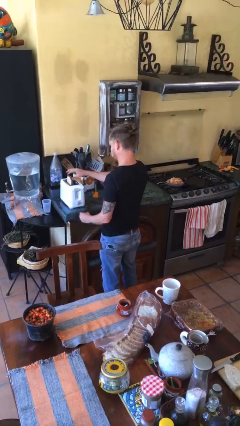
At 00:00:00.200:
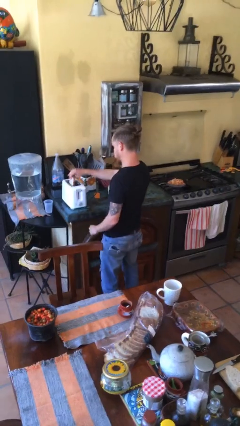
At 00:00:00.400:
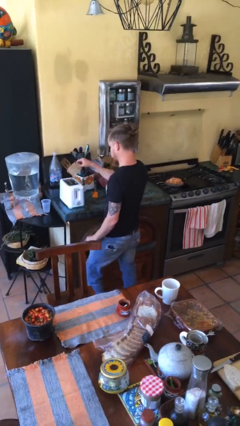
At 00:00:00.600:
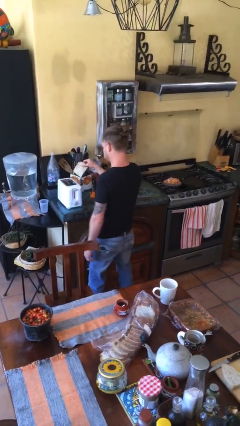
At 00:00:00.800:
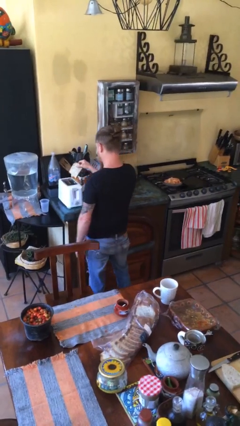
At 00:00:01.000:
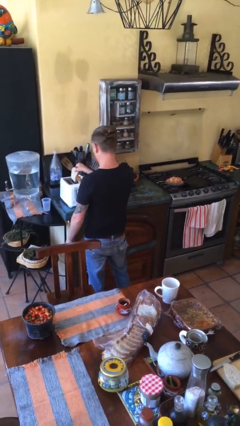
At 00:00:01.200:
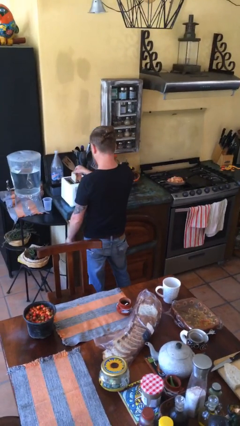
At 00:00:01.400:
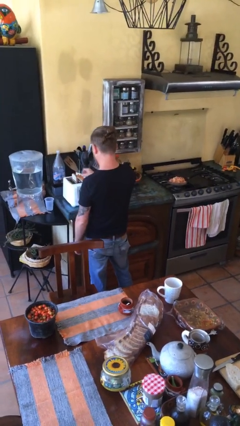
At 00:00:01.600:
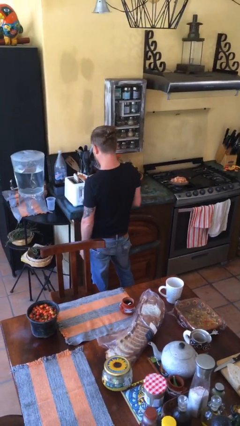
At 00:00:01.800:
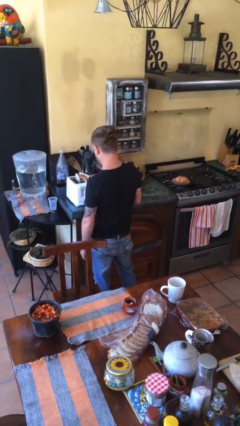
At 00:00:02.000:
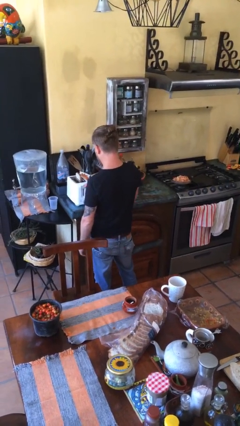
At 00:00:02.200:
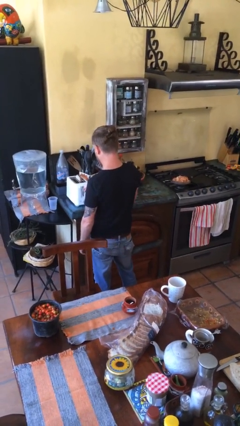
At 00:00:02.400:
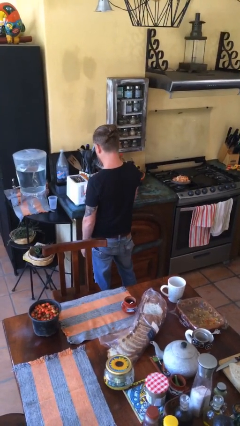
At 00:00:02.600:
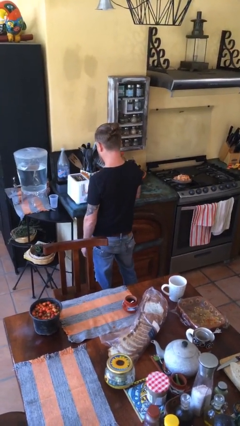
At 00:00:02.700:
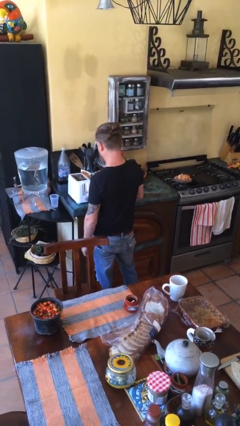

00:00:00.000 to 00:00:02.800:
person puts object into toaster

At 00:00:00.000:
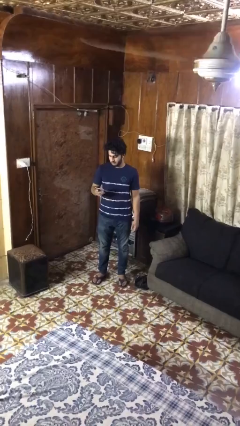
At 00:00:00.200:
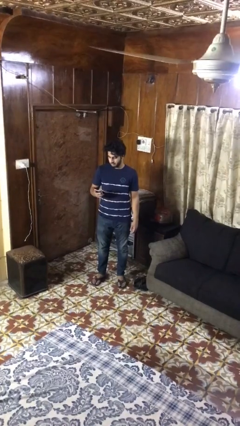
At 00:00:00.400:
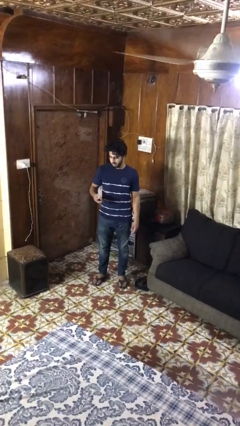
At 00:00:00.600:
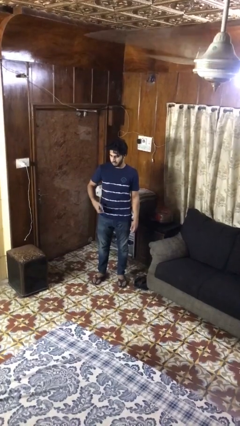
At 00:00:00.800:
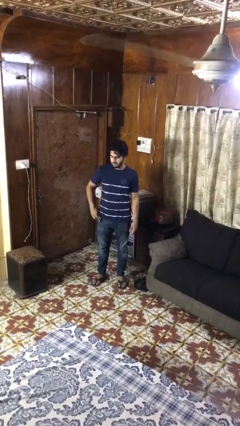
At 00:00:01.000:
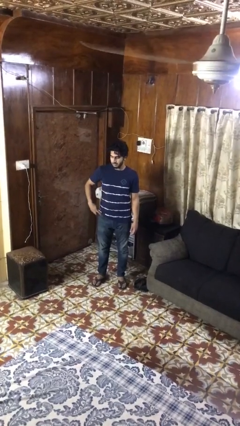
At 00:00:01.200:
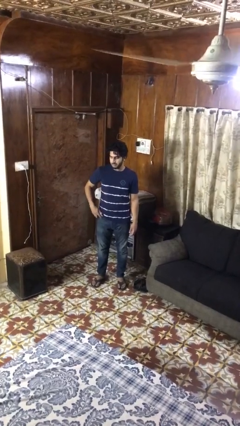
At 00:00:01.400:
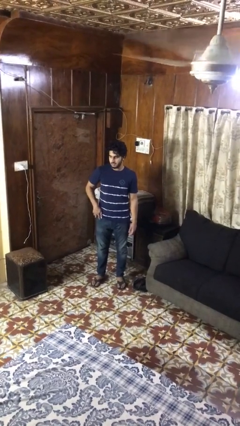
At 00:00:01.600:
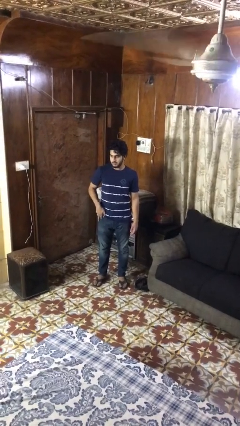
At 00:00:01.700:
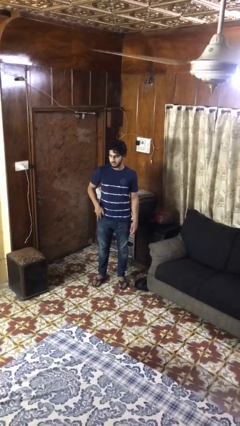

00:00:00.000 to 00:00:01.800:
person puts phone into pocket

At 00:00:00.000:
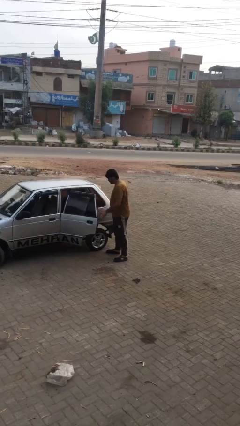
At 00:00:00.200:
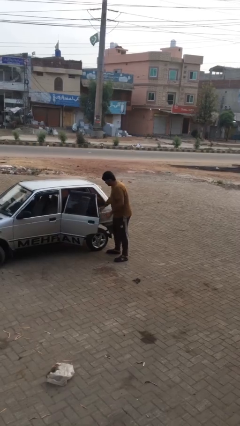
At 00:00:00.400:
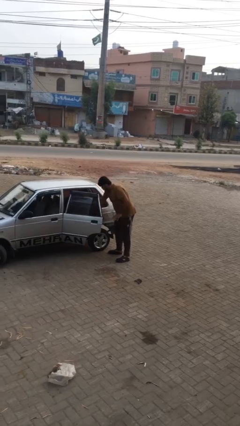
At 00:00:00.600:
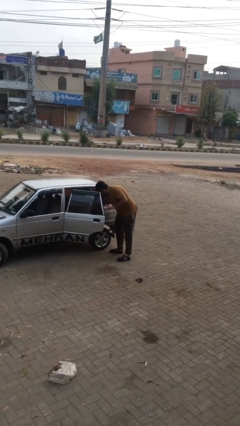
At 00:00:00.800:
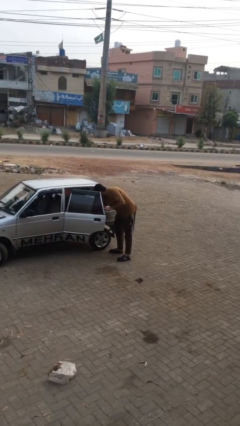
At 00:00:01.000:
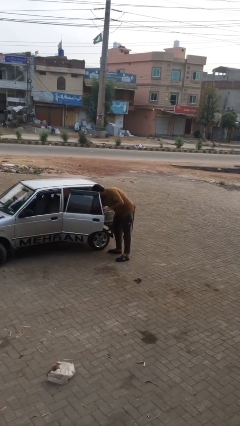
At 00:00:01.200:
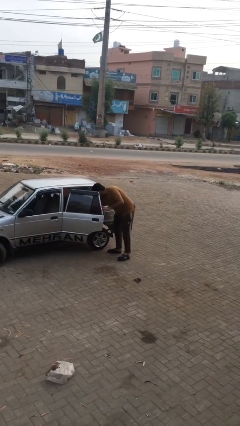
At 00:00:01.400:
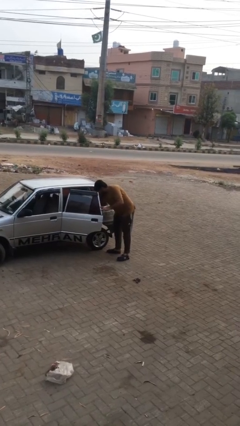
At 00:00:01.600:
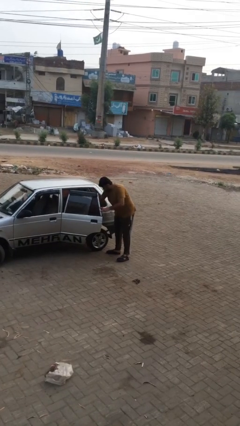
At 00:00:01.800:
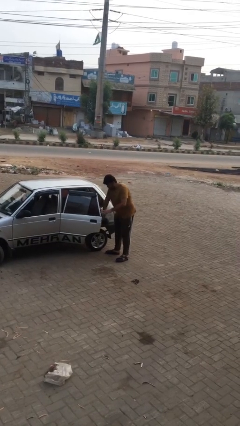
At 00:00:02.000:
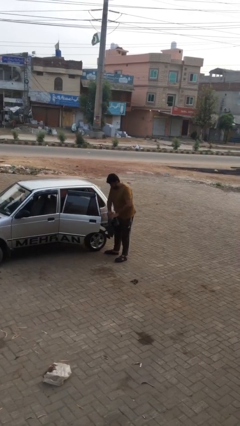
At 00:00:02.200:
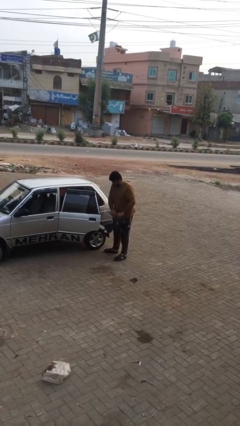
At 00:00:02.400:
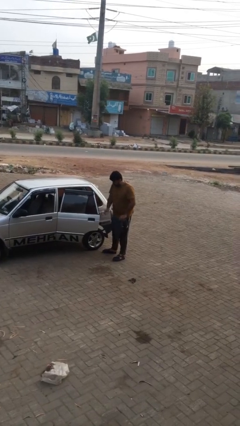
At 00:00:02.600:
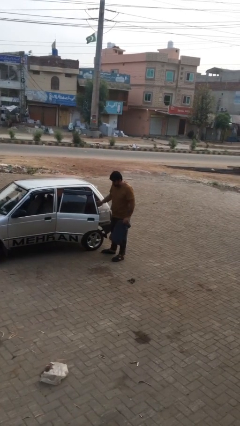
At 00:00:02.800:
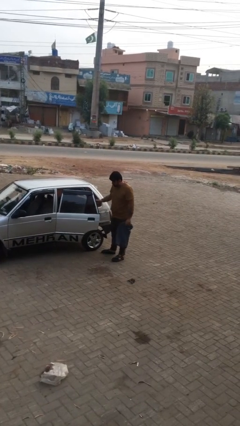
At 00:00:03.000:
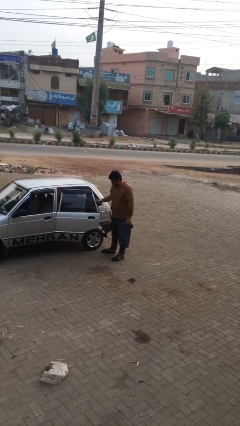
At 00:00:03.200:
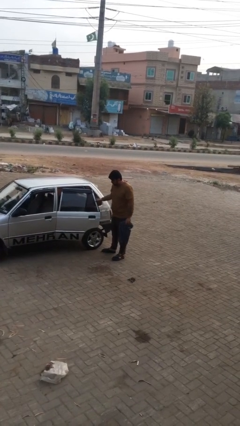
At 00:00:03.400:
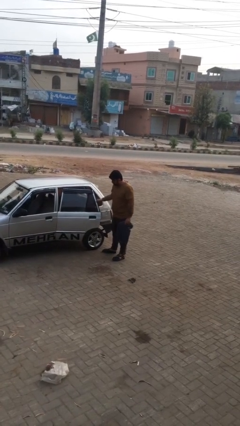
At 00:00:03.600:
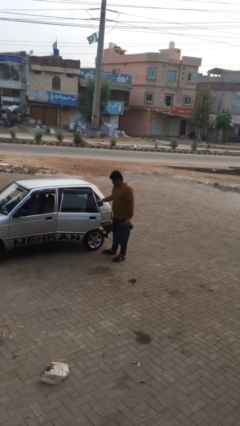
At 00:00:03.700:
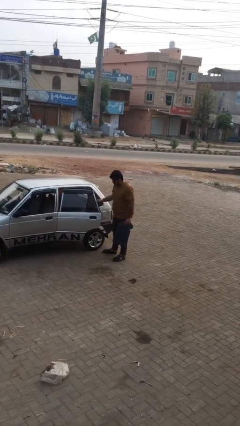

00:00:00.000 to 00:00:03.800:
person unloads car

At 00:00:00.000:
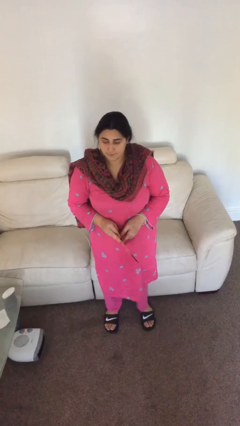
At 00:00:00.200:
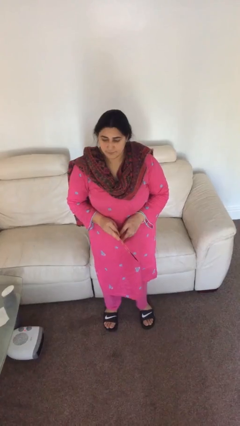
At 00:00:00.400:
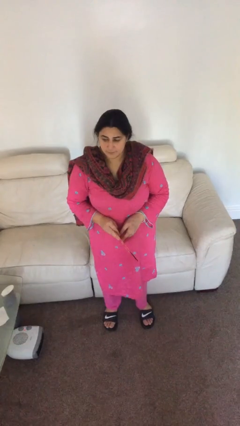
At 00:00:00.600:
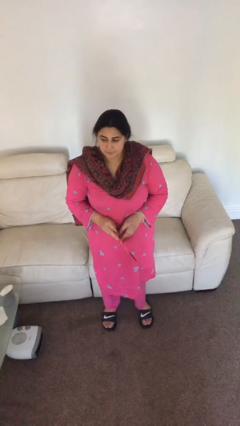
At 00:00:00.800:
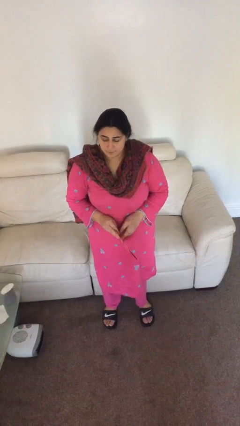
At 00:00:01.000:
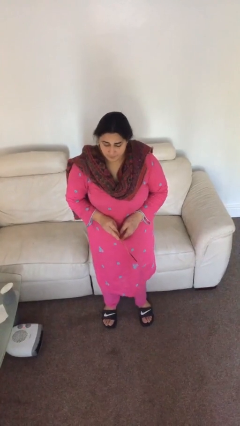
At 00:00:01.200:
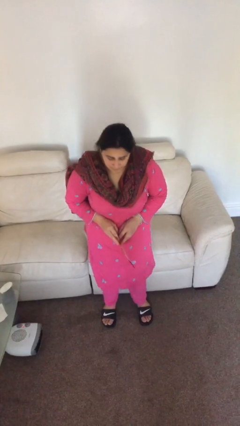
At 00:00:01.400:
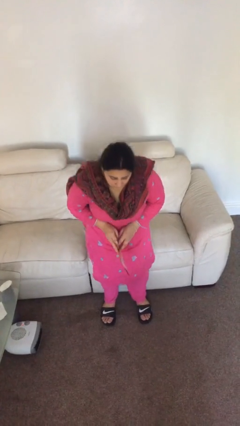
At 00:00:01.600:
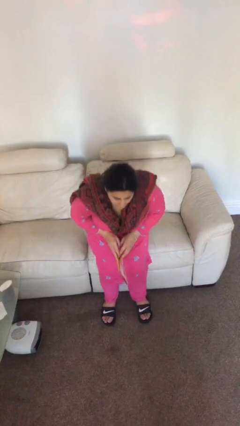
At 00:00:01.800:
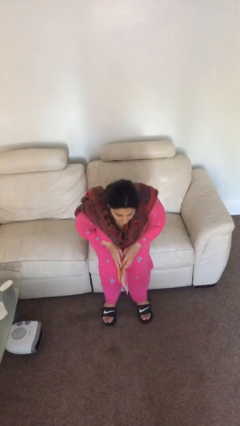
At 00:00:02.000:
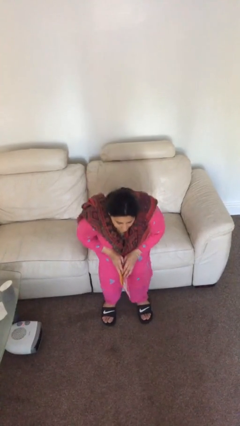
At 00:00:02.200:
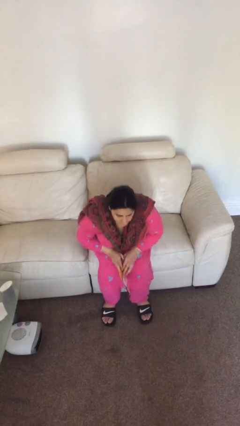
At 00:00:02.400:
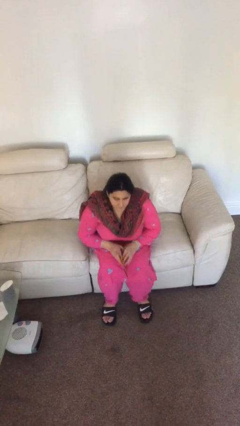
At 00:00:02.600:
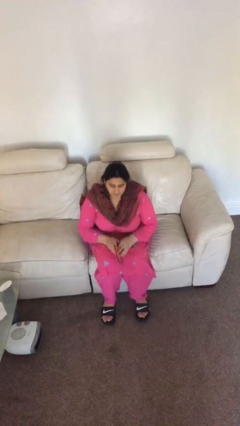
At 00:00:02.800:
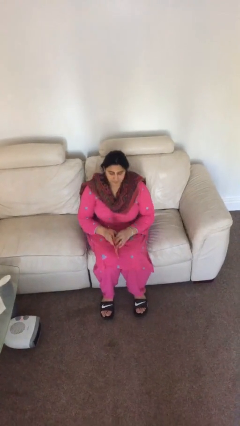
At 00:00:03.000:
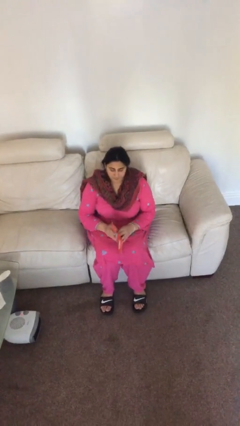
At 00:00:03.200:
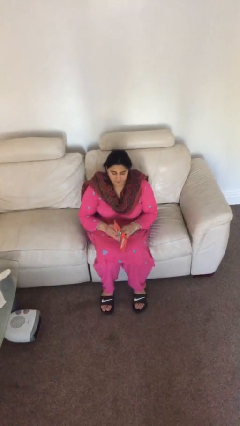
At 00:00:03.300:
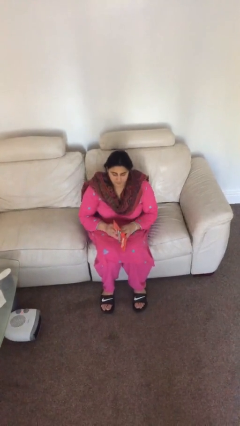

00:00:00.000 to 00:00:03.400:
person sits down

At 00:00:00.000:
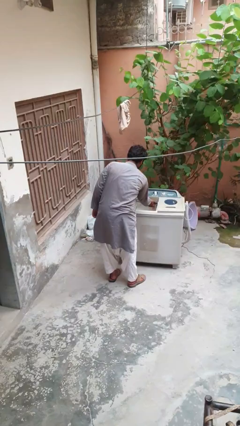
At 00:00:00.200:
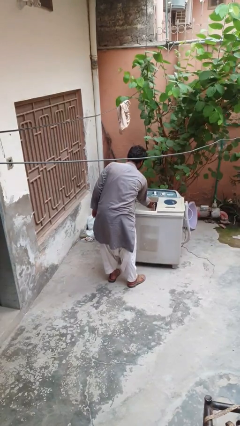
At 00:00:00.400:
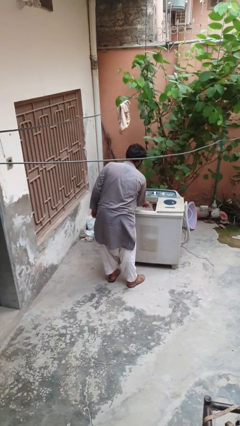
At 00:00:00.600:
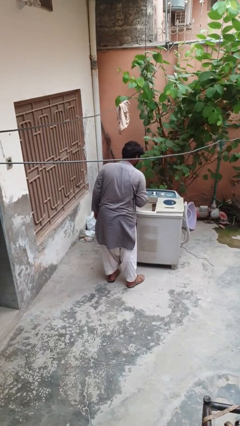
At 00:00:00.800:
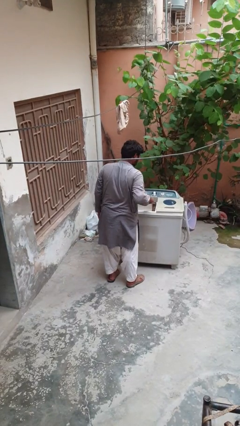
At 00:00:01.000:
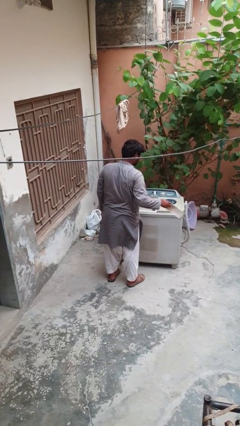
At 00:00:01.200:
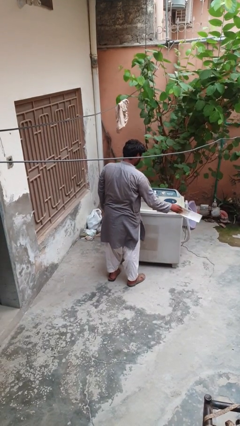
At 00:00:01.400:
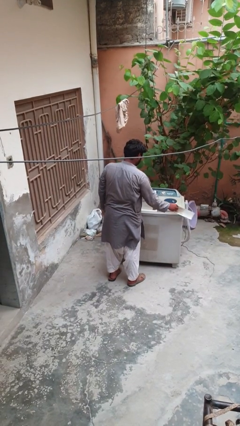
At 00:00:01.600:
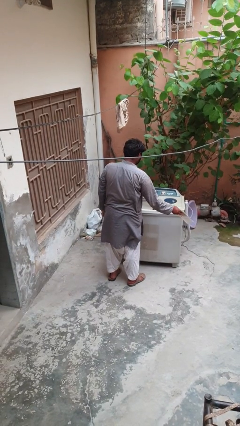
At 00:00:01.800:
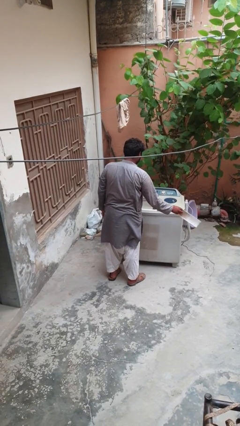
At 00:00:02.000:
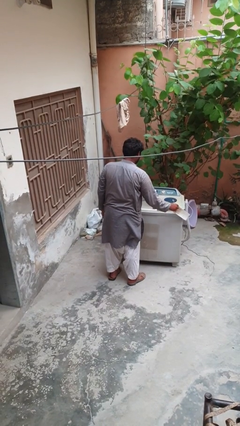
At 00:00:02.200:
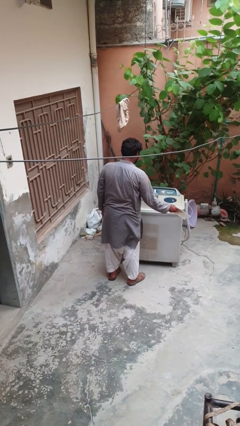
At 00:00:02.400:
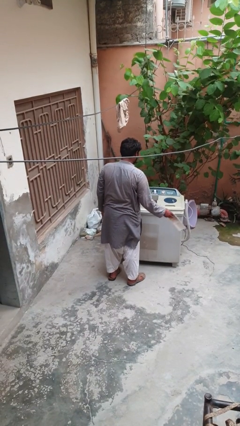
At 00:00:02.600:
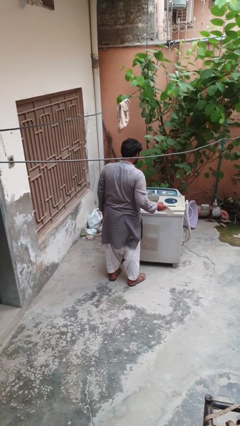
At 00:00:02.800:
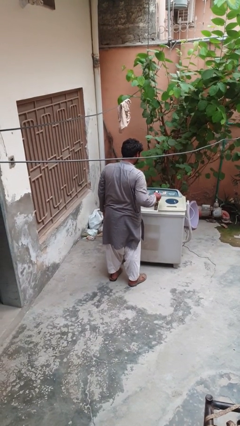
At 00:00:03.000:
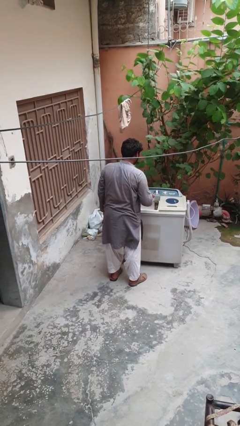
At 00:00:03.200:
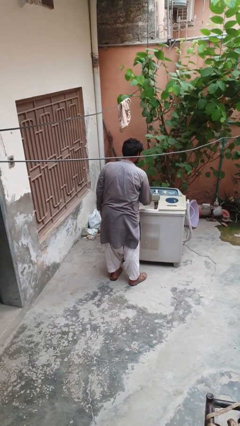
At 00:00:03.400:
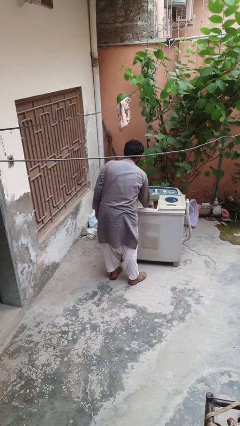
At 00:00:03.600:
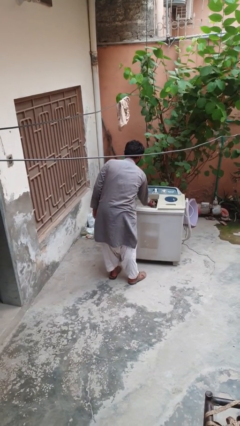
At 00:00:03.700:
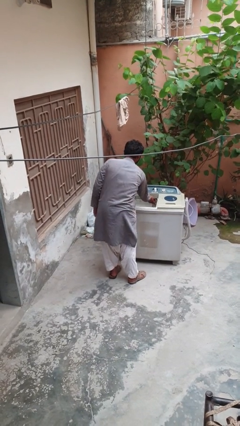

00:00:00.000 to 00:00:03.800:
person cleans dryer lint trap

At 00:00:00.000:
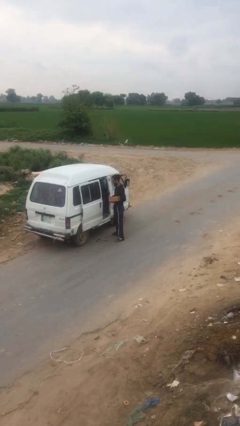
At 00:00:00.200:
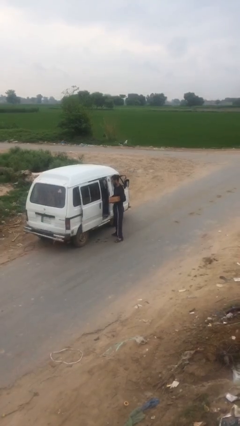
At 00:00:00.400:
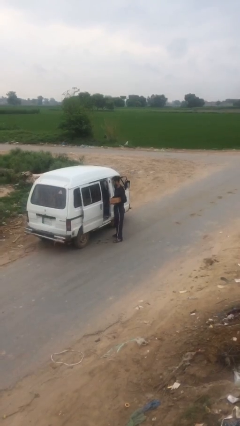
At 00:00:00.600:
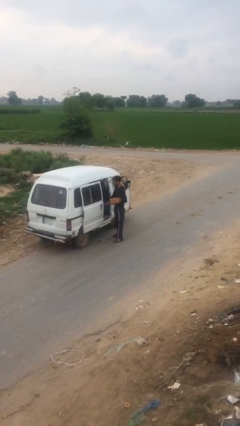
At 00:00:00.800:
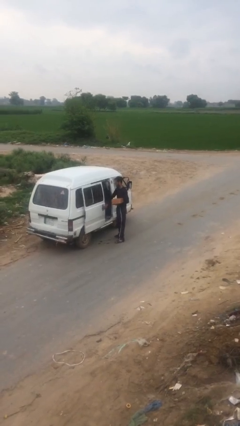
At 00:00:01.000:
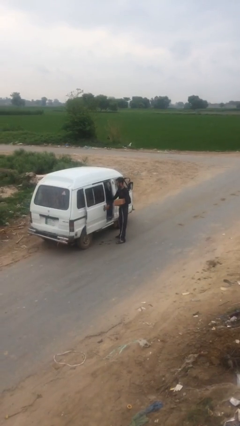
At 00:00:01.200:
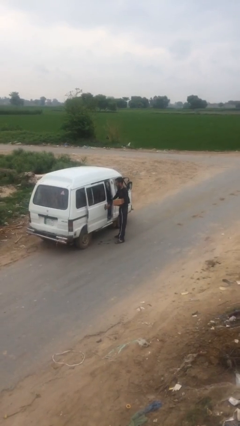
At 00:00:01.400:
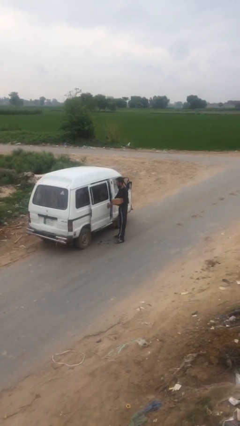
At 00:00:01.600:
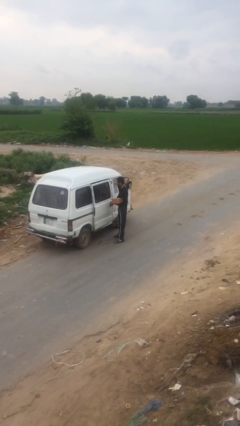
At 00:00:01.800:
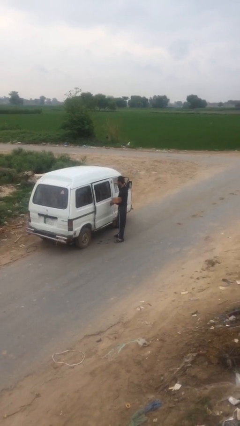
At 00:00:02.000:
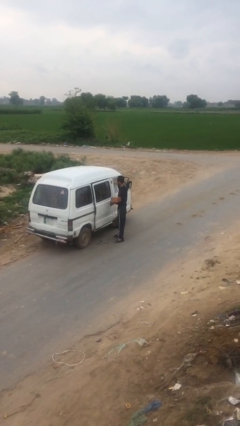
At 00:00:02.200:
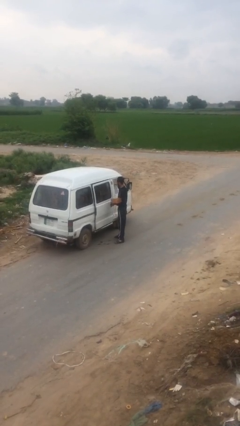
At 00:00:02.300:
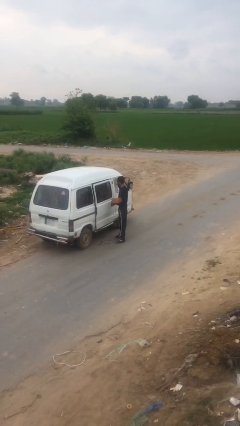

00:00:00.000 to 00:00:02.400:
person closes car door
